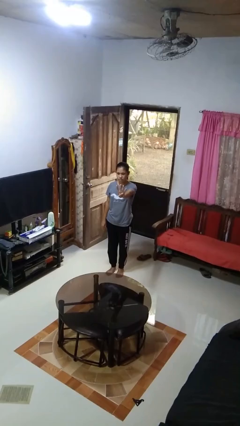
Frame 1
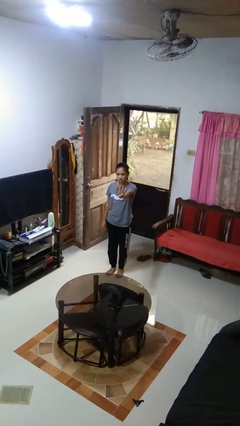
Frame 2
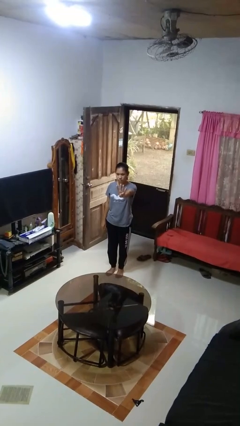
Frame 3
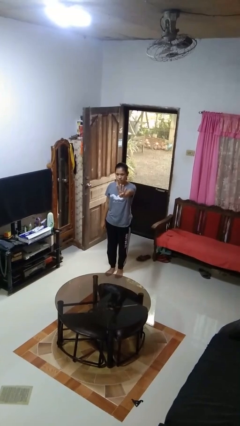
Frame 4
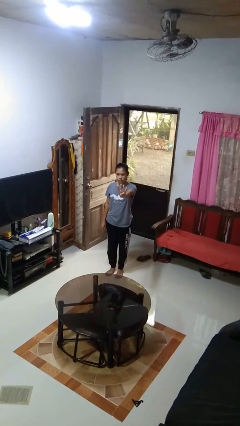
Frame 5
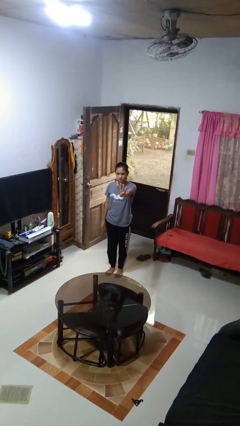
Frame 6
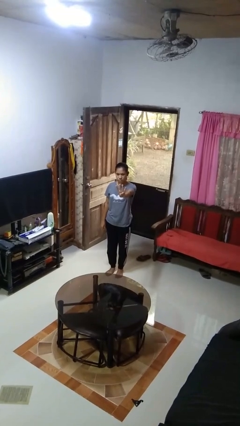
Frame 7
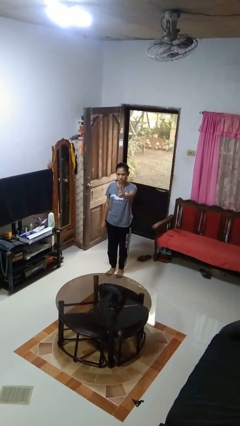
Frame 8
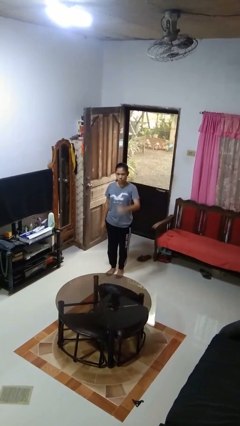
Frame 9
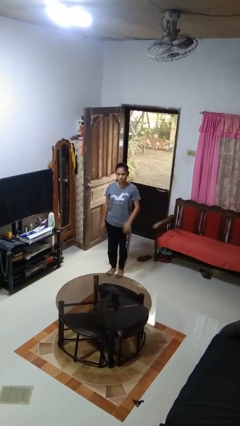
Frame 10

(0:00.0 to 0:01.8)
person gestures number four

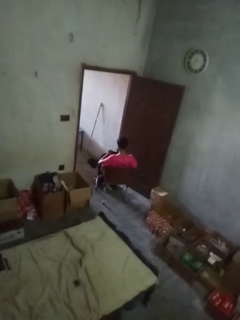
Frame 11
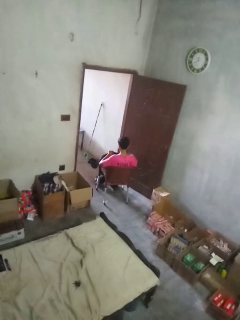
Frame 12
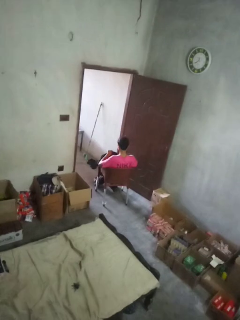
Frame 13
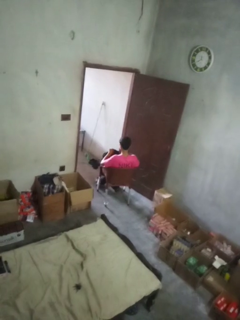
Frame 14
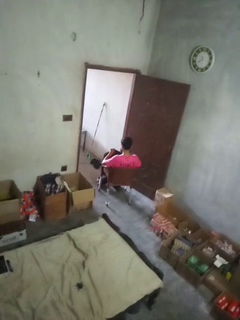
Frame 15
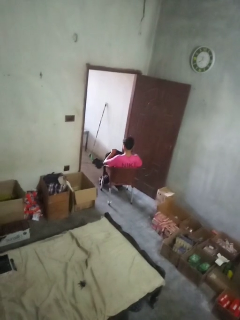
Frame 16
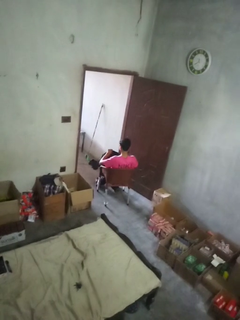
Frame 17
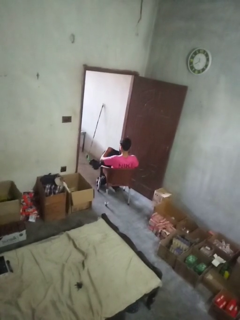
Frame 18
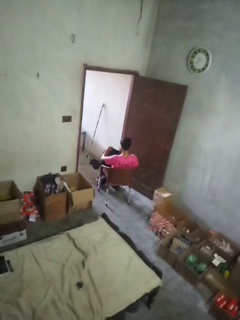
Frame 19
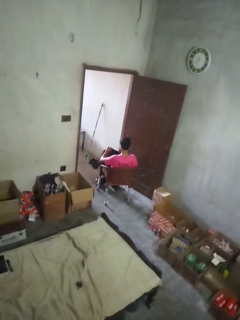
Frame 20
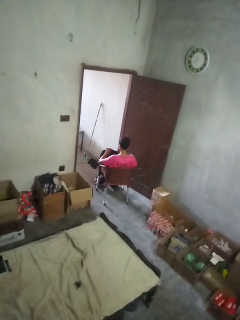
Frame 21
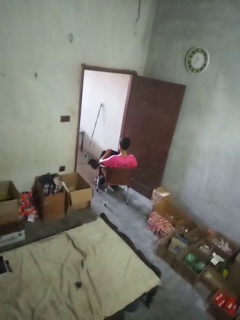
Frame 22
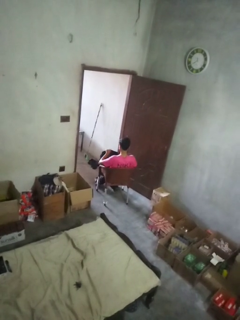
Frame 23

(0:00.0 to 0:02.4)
person searches in backpack

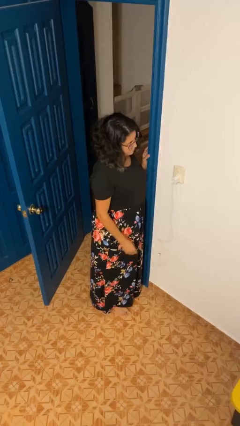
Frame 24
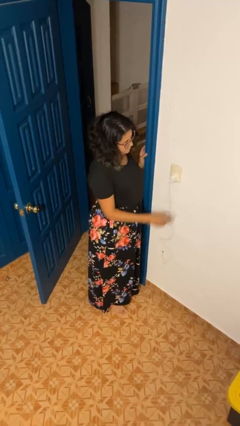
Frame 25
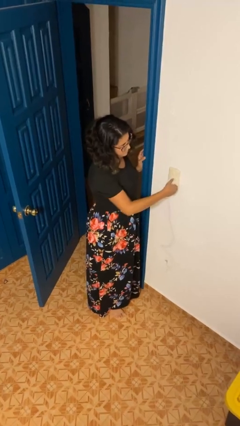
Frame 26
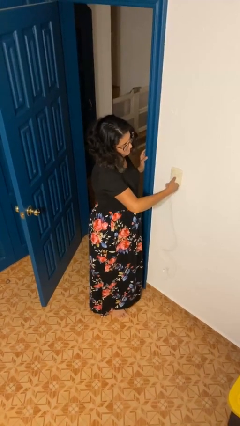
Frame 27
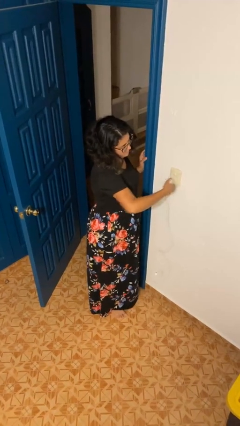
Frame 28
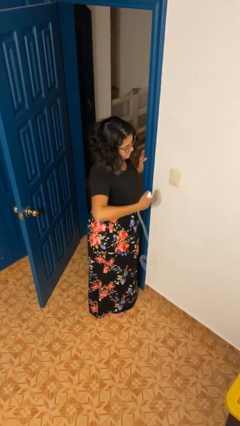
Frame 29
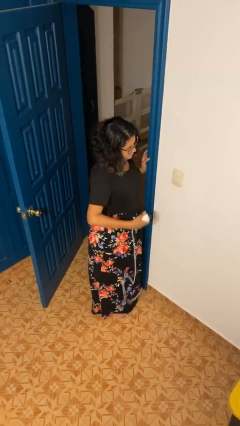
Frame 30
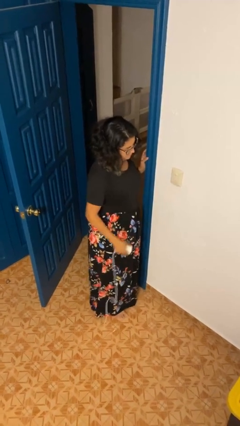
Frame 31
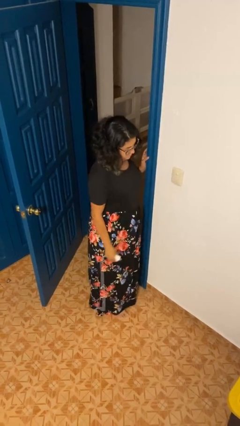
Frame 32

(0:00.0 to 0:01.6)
person unplugs from electrical socket

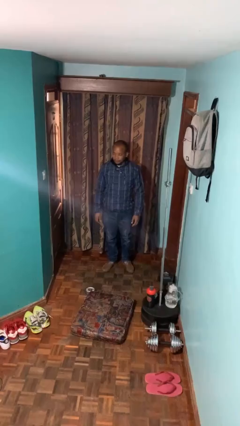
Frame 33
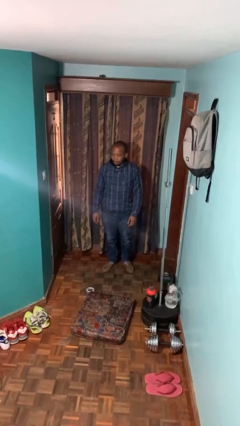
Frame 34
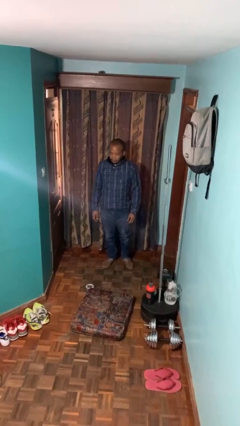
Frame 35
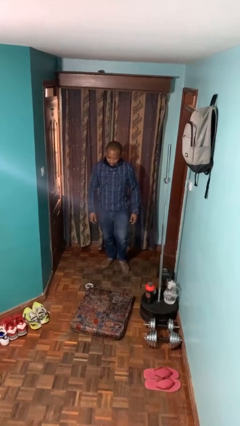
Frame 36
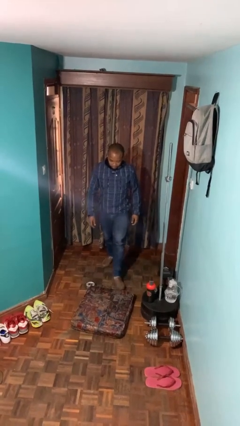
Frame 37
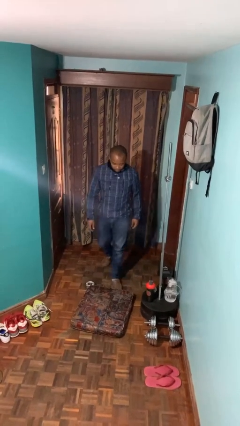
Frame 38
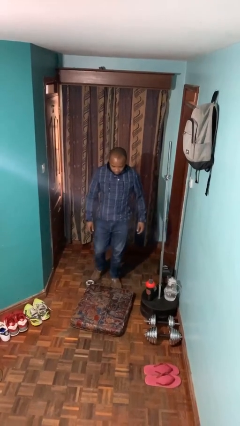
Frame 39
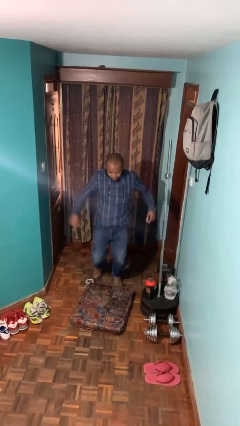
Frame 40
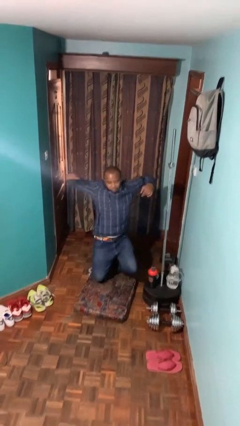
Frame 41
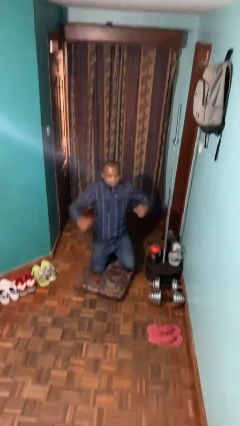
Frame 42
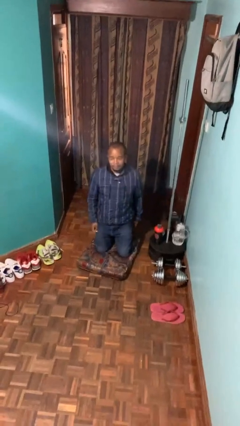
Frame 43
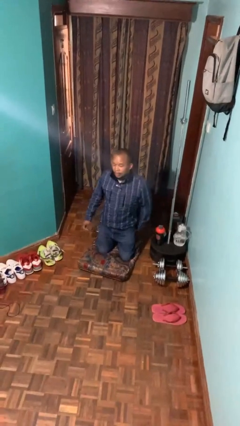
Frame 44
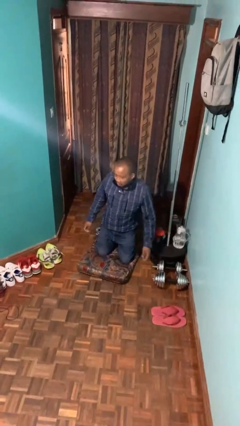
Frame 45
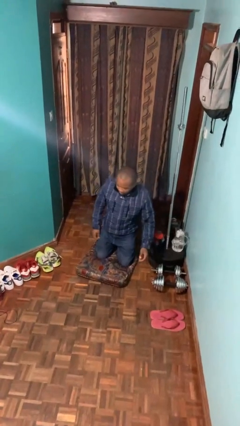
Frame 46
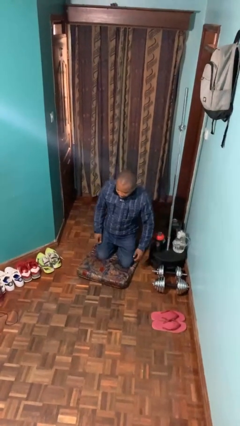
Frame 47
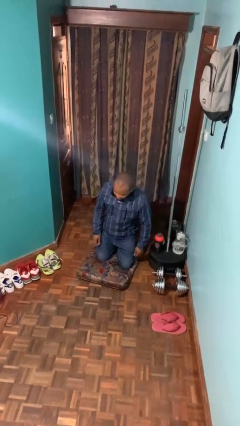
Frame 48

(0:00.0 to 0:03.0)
person trips on object on floor

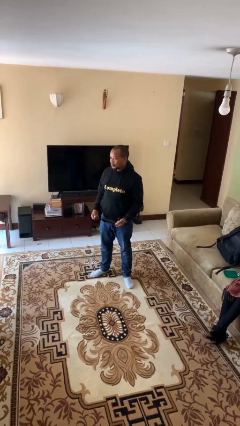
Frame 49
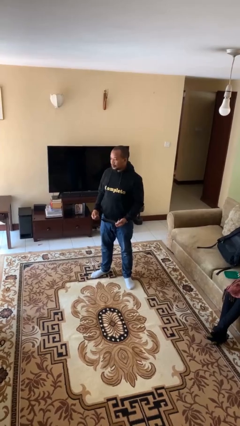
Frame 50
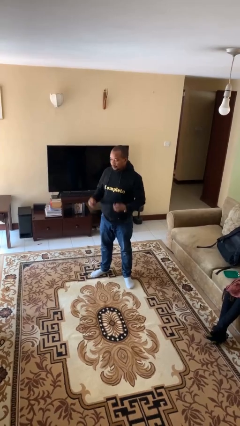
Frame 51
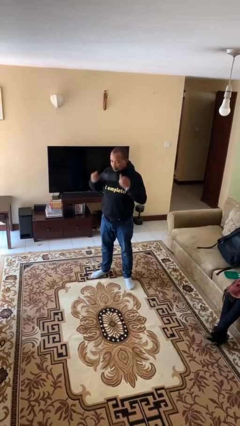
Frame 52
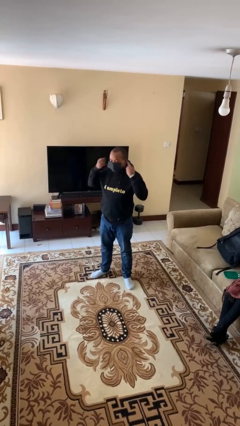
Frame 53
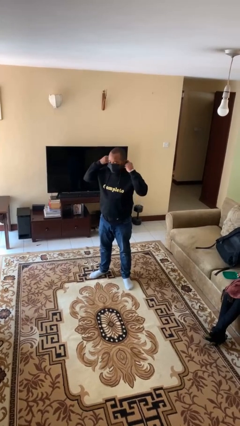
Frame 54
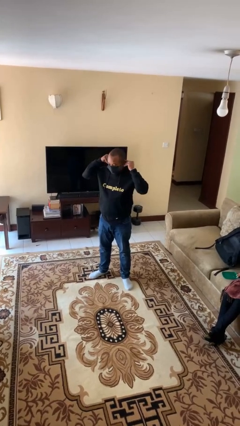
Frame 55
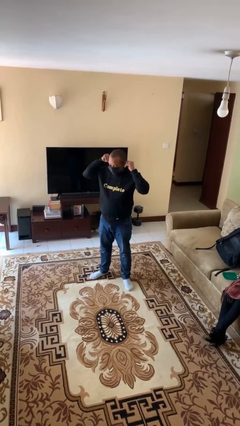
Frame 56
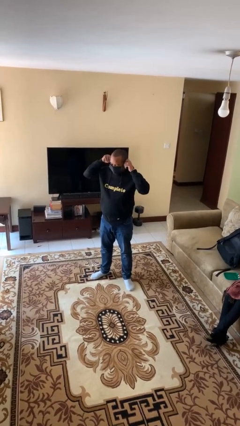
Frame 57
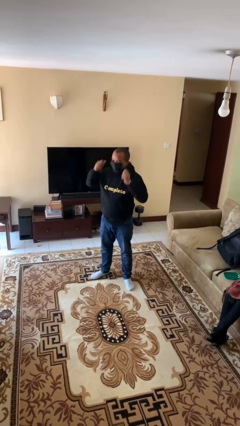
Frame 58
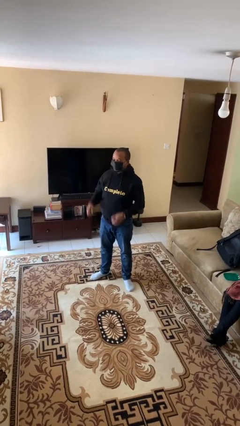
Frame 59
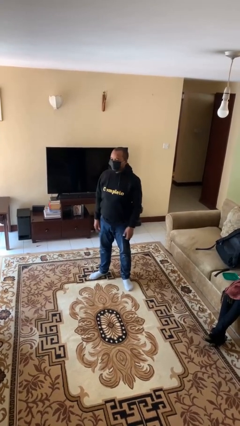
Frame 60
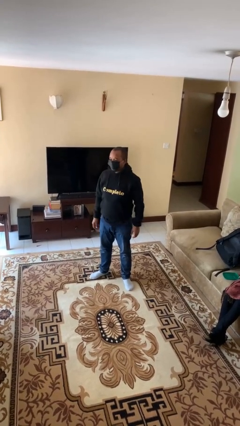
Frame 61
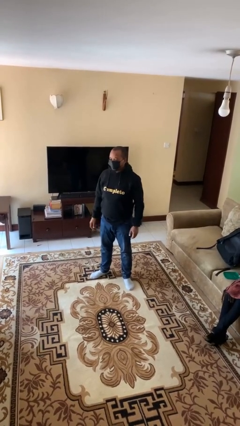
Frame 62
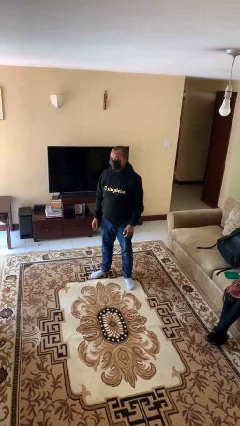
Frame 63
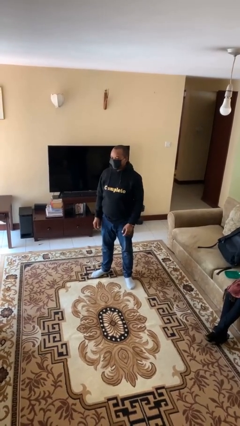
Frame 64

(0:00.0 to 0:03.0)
person puts on facemask

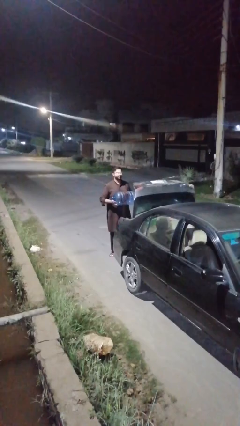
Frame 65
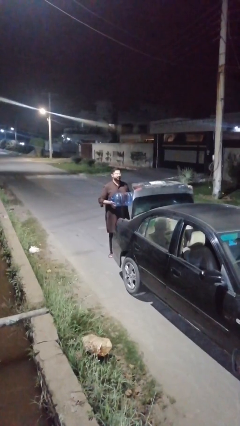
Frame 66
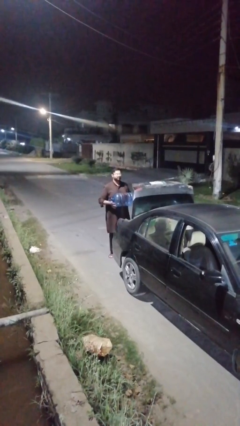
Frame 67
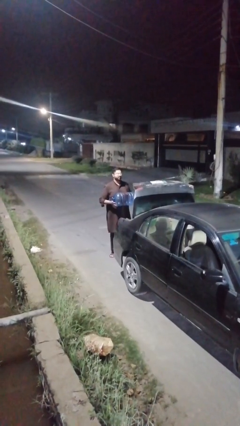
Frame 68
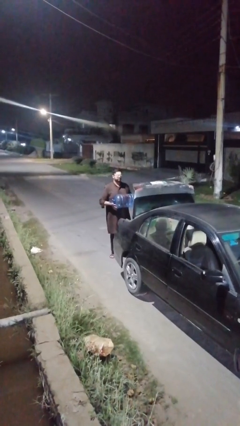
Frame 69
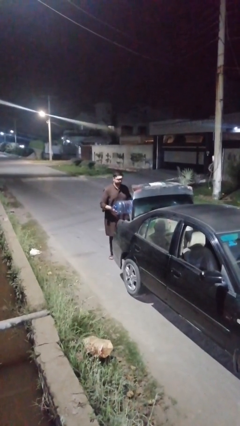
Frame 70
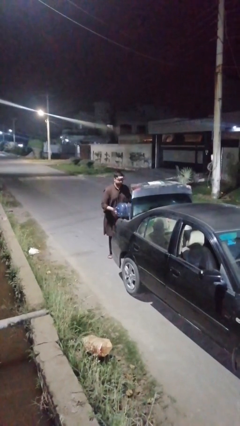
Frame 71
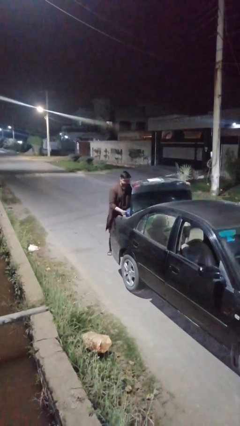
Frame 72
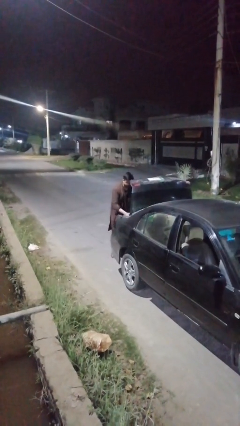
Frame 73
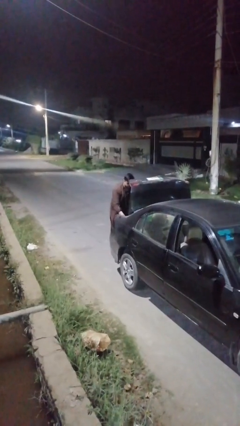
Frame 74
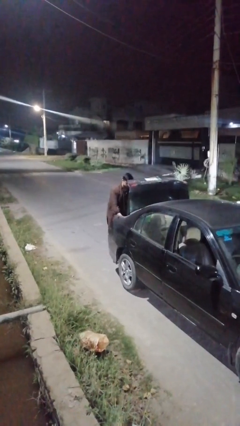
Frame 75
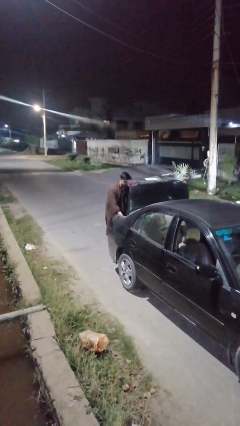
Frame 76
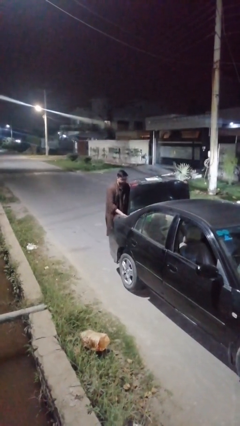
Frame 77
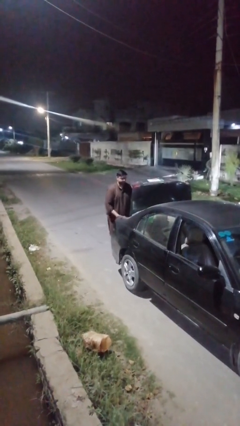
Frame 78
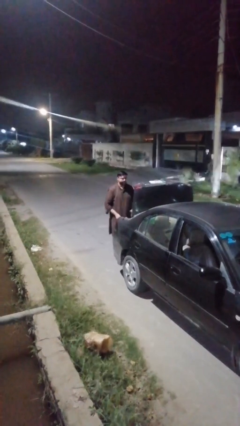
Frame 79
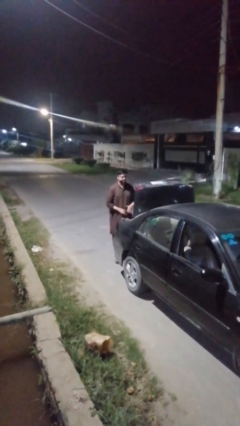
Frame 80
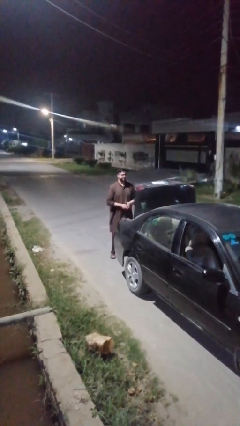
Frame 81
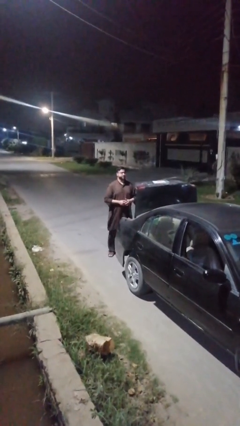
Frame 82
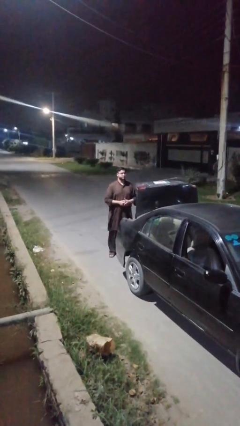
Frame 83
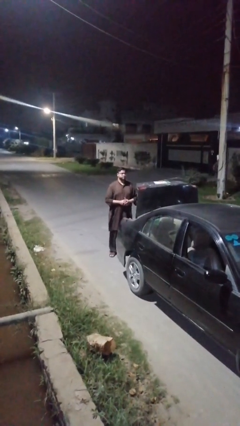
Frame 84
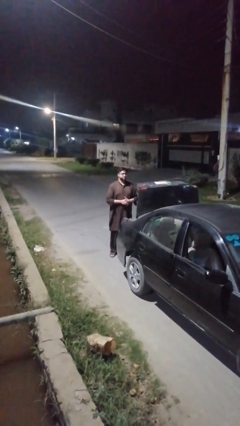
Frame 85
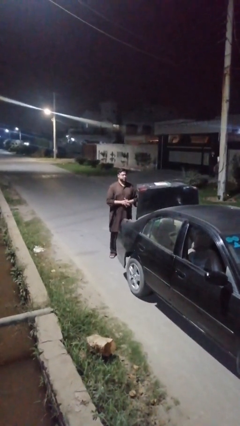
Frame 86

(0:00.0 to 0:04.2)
person loads car

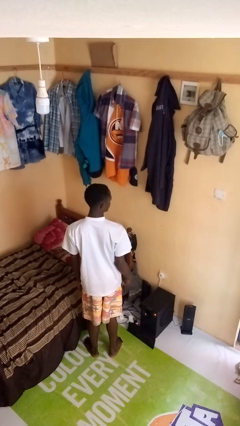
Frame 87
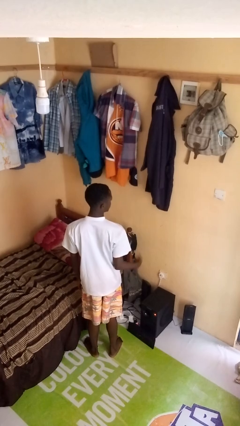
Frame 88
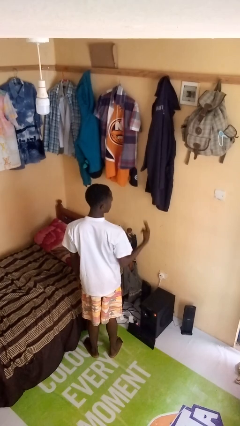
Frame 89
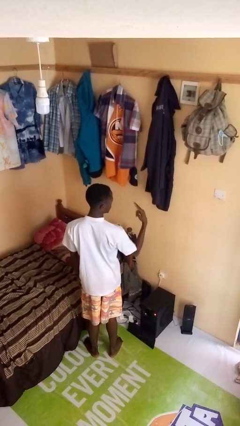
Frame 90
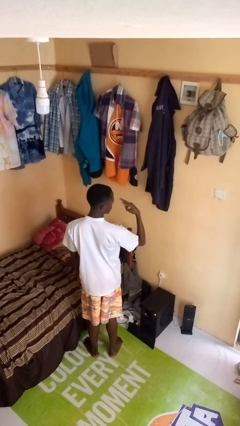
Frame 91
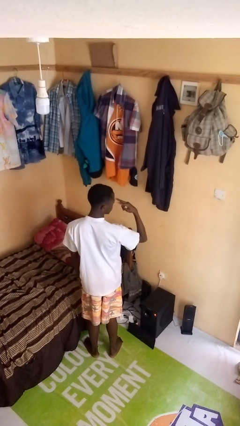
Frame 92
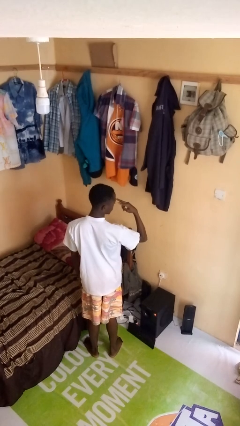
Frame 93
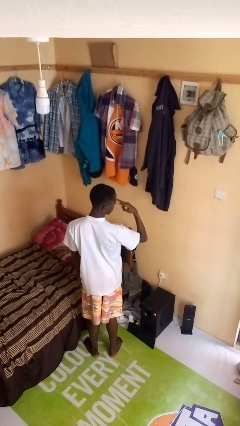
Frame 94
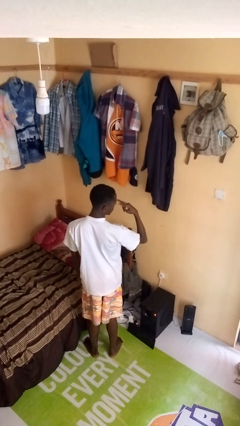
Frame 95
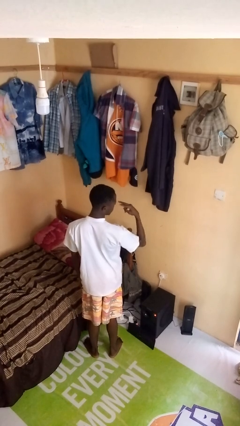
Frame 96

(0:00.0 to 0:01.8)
person gestures watch closely
